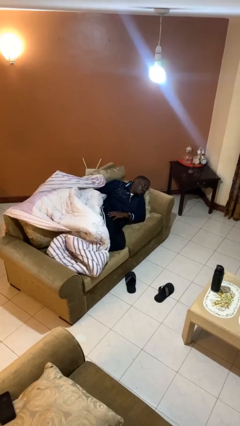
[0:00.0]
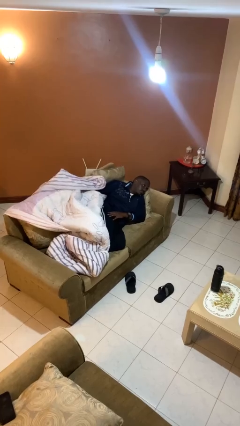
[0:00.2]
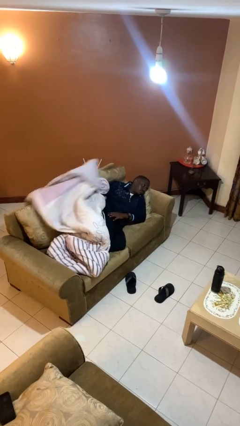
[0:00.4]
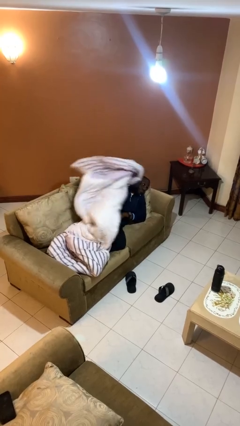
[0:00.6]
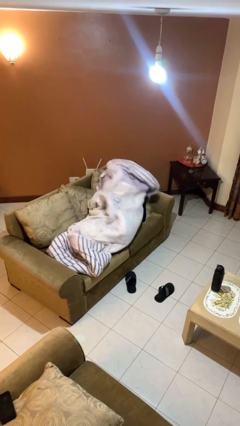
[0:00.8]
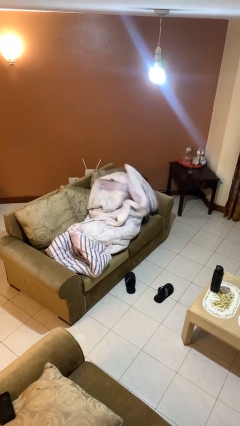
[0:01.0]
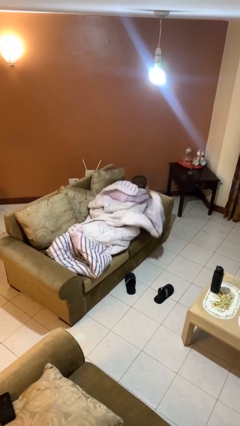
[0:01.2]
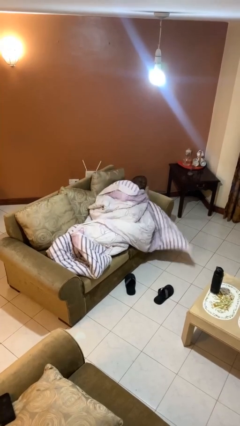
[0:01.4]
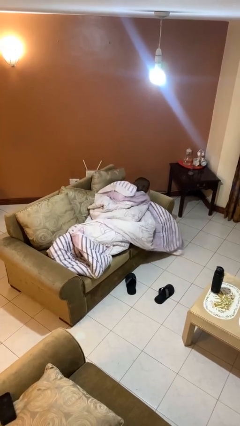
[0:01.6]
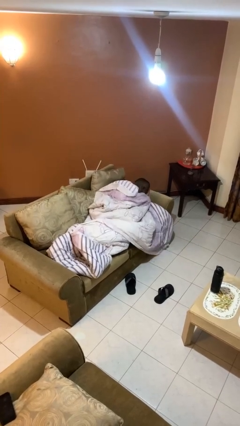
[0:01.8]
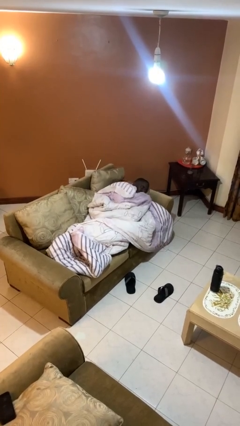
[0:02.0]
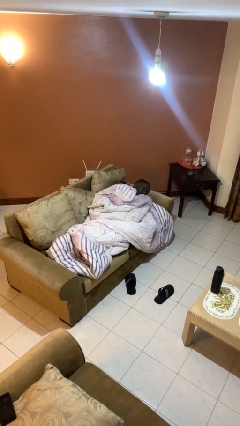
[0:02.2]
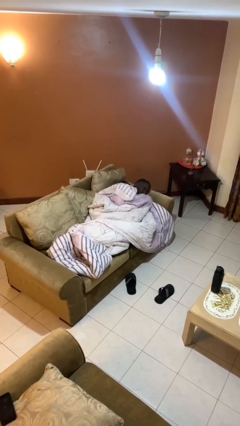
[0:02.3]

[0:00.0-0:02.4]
person covers with blanket

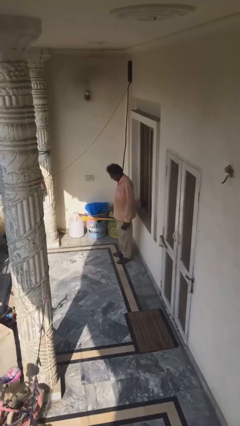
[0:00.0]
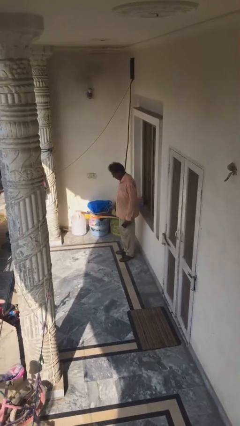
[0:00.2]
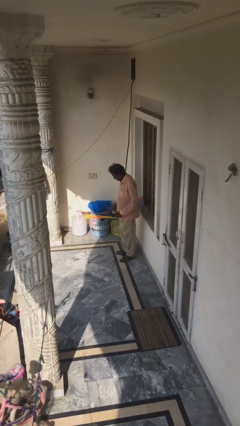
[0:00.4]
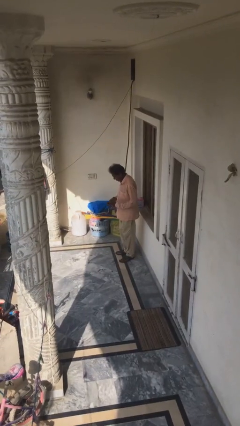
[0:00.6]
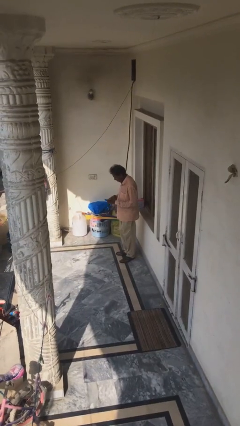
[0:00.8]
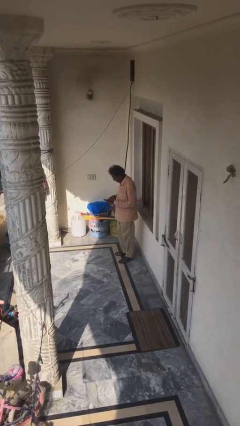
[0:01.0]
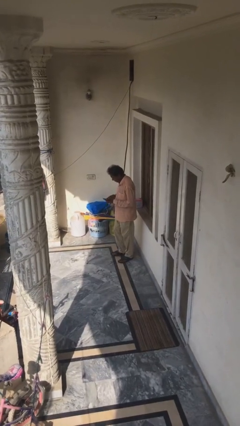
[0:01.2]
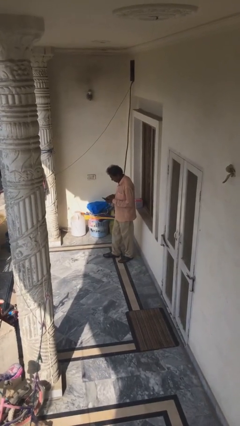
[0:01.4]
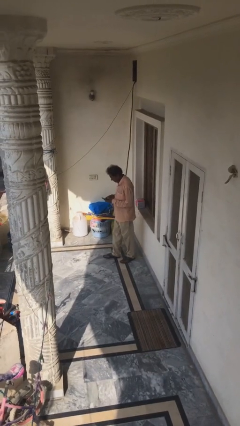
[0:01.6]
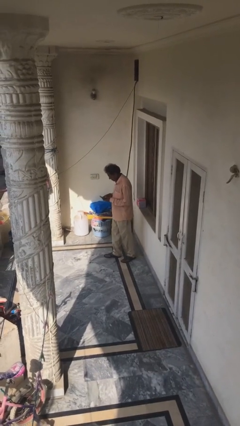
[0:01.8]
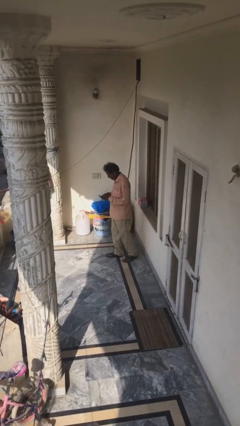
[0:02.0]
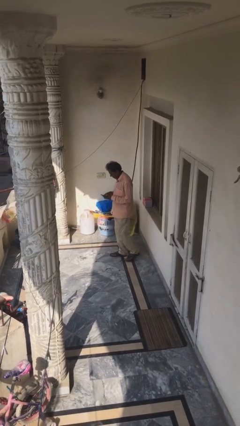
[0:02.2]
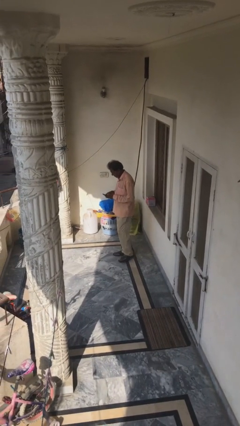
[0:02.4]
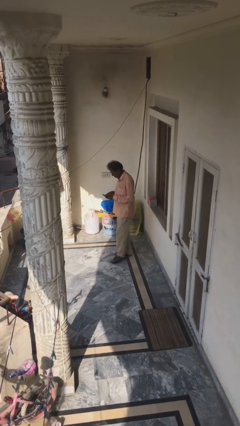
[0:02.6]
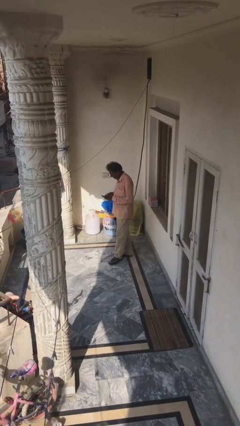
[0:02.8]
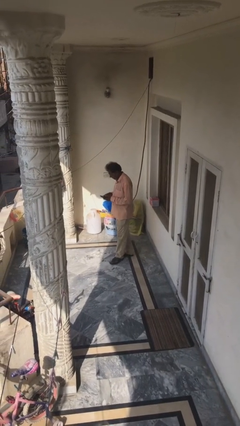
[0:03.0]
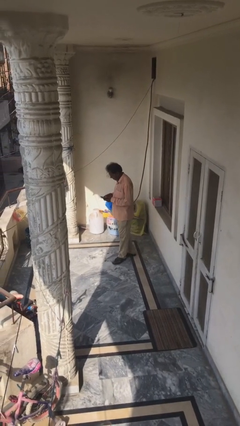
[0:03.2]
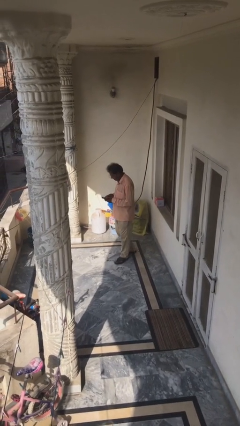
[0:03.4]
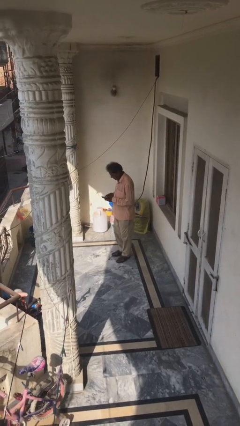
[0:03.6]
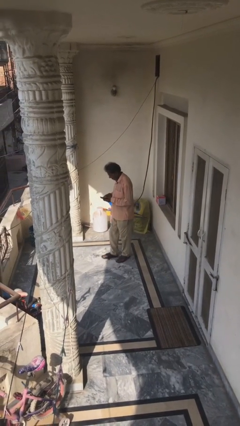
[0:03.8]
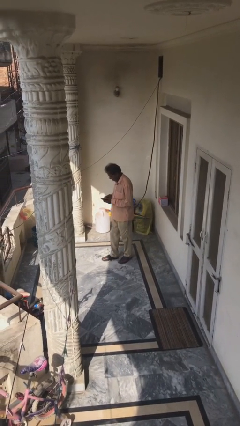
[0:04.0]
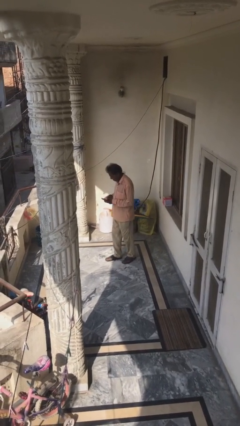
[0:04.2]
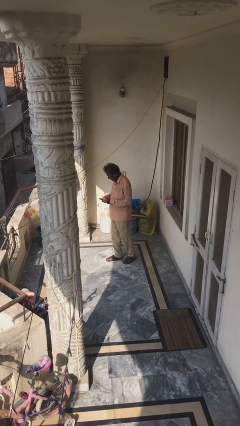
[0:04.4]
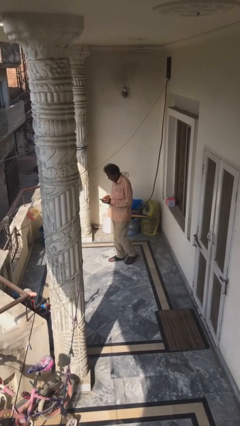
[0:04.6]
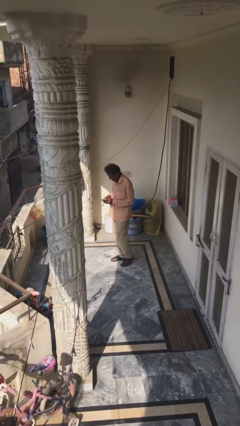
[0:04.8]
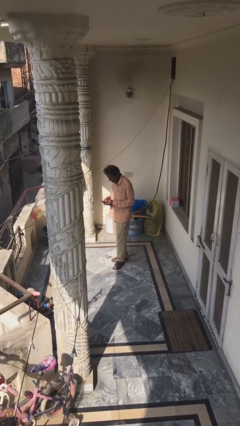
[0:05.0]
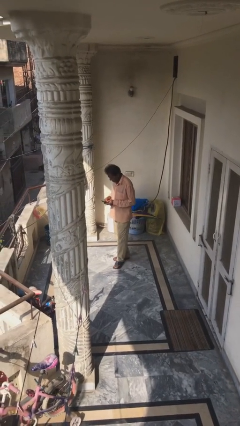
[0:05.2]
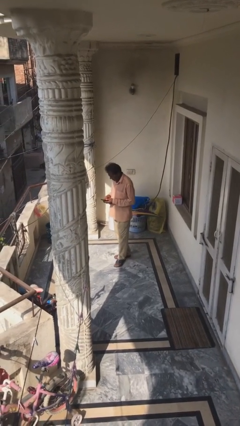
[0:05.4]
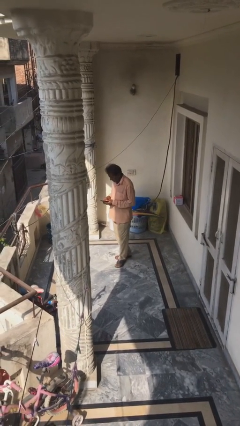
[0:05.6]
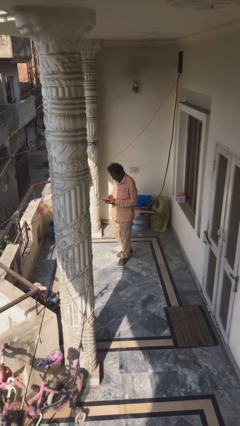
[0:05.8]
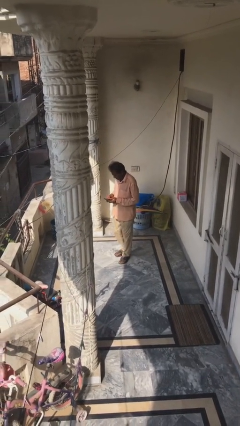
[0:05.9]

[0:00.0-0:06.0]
person texts on phone

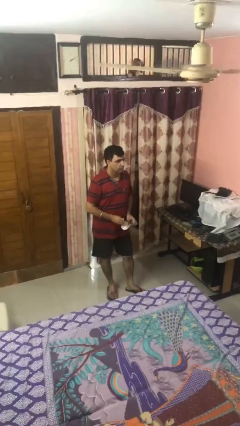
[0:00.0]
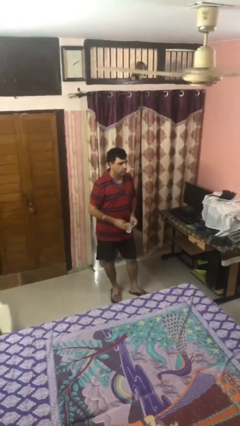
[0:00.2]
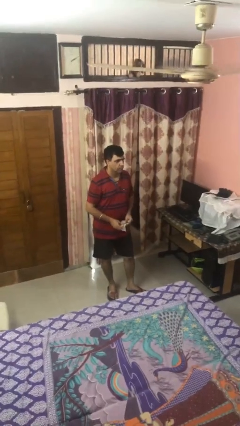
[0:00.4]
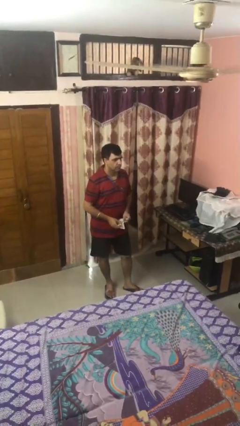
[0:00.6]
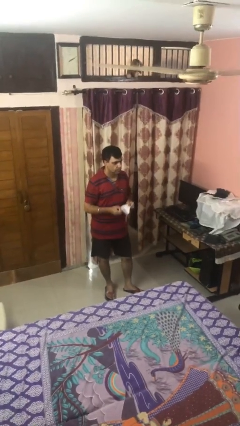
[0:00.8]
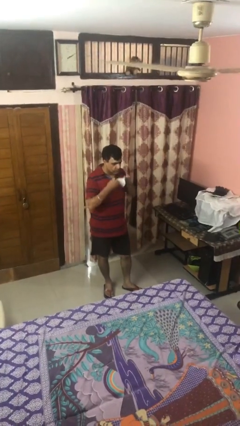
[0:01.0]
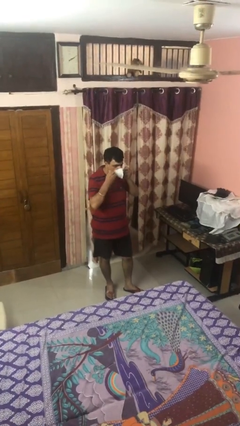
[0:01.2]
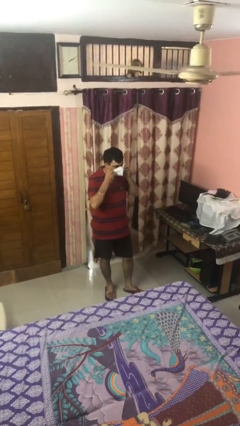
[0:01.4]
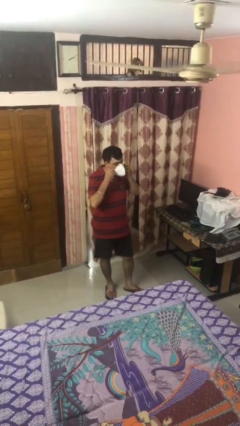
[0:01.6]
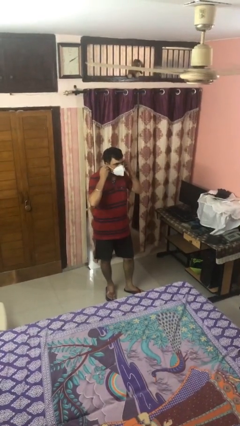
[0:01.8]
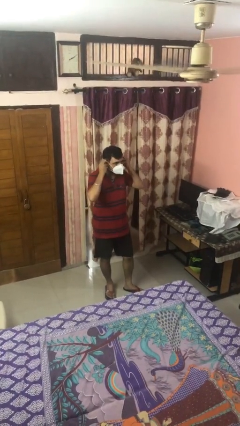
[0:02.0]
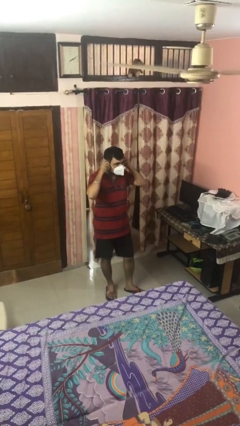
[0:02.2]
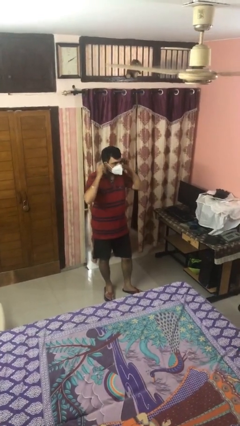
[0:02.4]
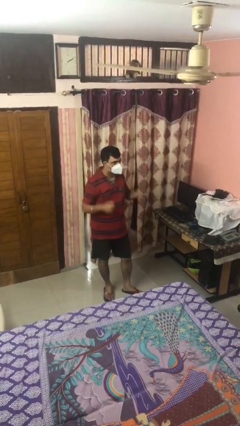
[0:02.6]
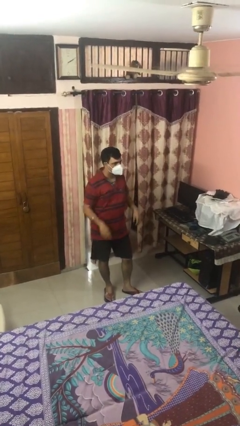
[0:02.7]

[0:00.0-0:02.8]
person puts on facemask

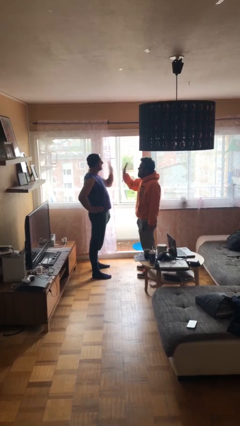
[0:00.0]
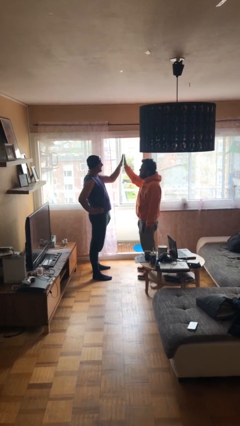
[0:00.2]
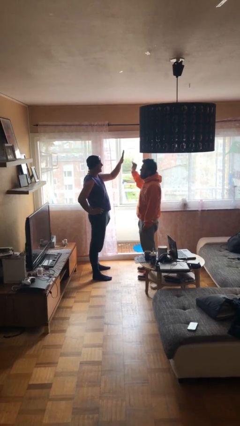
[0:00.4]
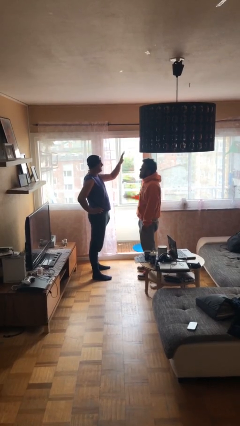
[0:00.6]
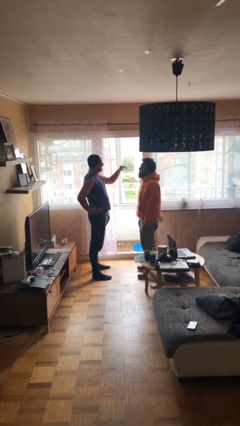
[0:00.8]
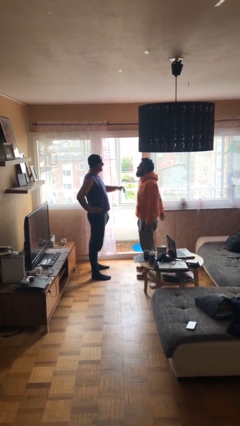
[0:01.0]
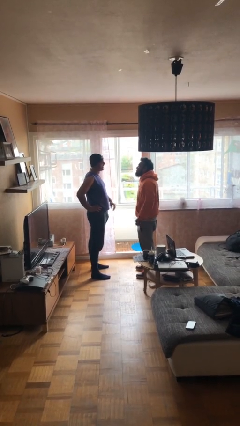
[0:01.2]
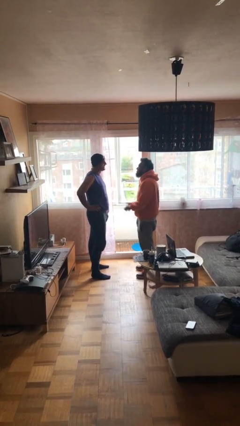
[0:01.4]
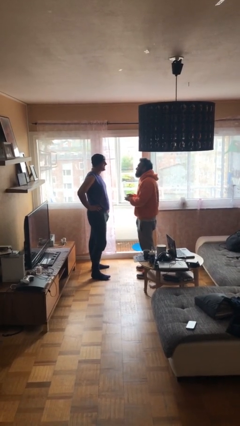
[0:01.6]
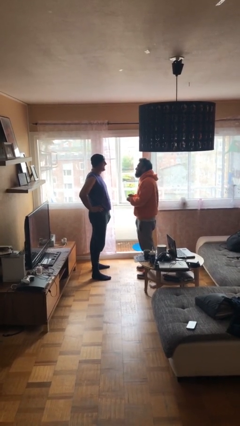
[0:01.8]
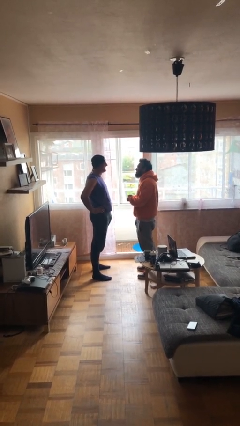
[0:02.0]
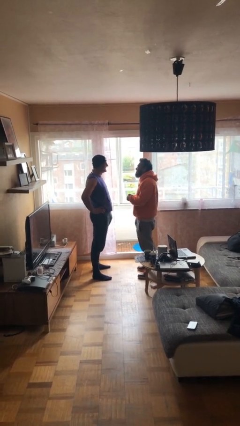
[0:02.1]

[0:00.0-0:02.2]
person highfives hand

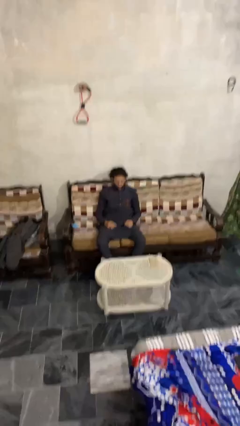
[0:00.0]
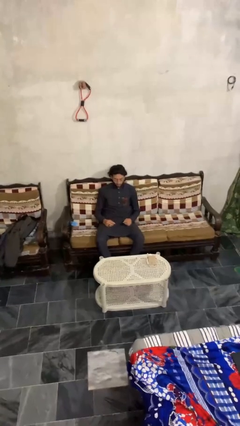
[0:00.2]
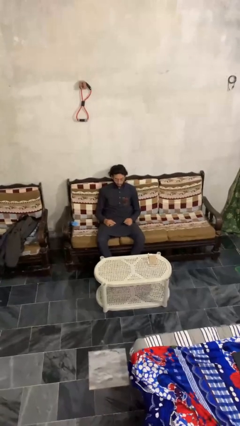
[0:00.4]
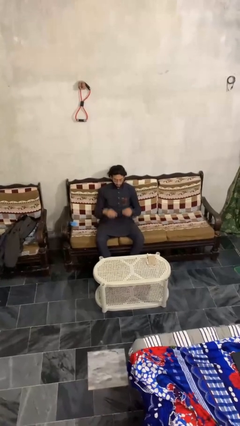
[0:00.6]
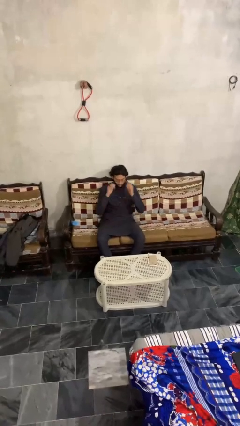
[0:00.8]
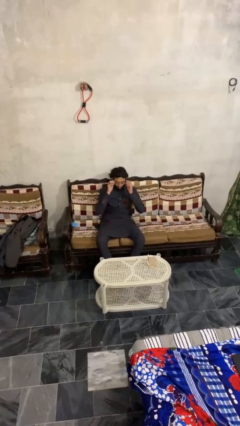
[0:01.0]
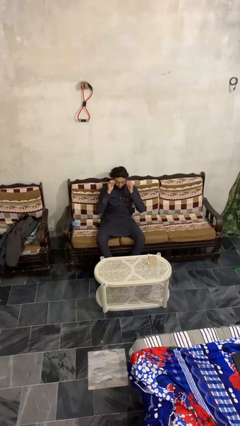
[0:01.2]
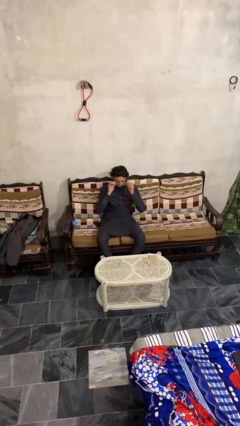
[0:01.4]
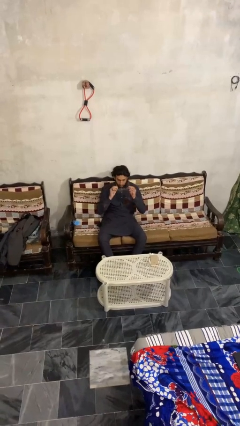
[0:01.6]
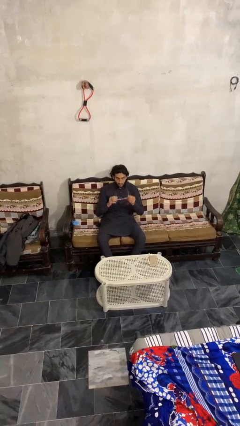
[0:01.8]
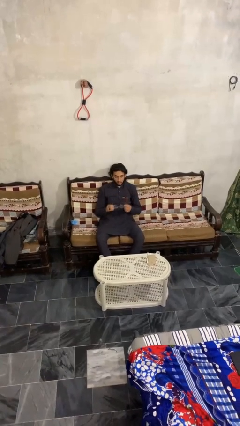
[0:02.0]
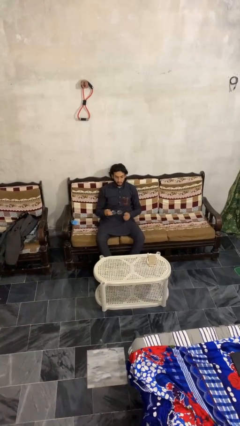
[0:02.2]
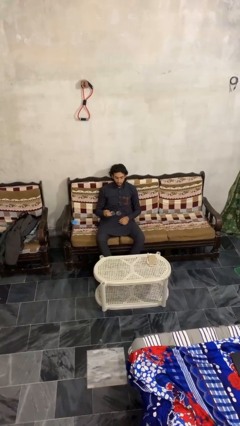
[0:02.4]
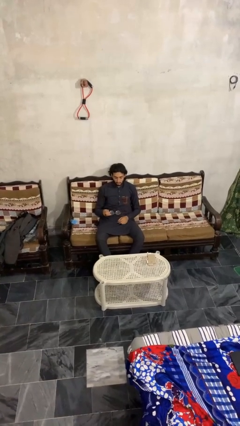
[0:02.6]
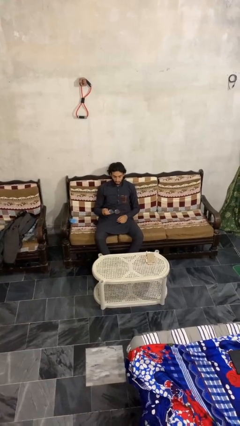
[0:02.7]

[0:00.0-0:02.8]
person takes off glasses

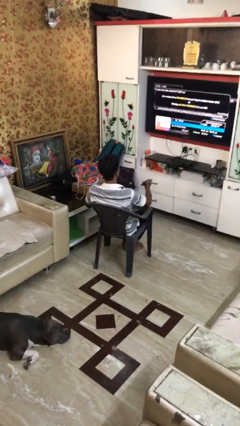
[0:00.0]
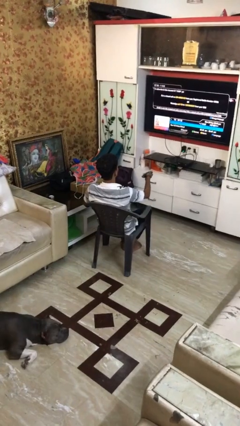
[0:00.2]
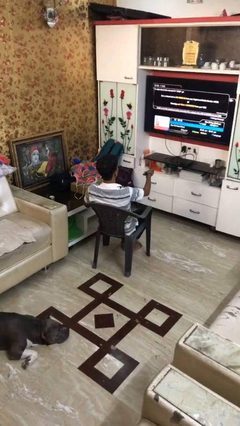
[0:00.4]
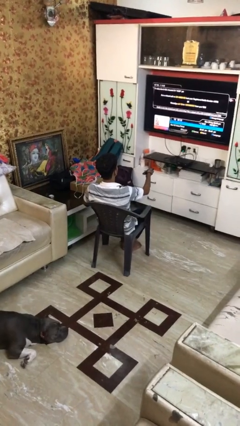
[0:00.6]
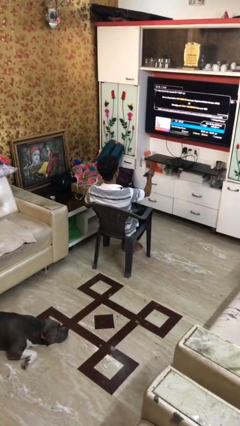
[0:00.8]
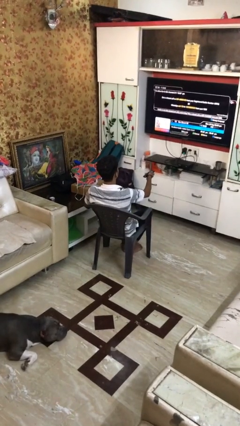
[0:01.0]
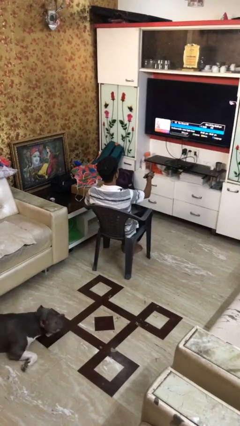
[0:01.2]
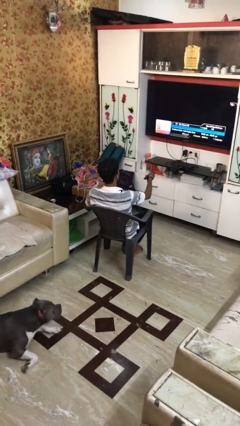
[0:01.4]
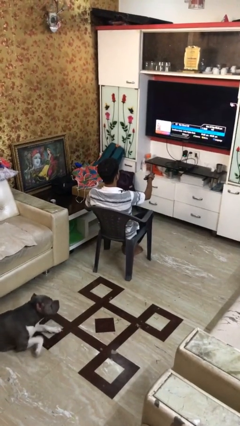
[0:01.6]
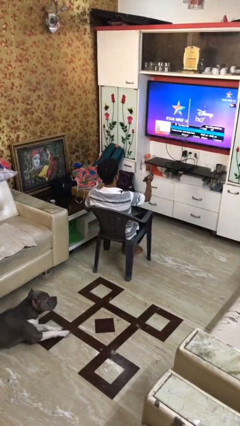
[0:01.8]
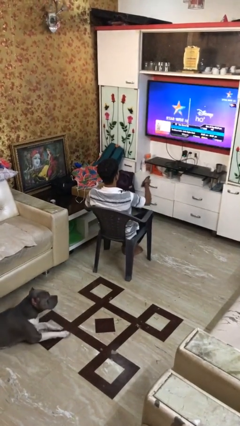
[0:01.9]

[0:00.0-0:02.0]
person uses television remote
